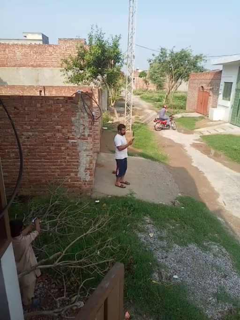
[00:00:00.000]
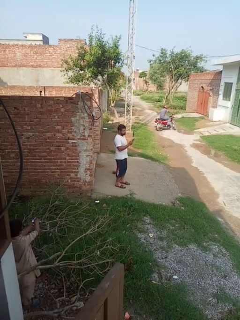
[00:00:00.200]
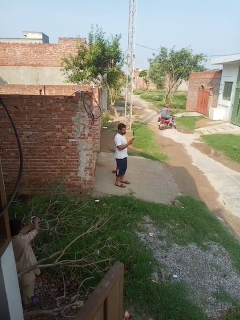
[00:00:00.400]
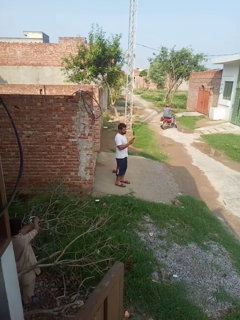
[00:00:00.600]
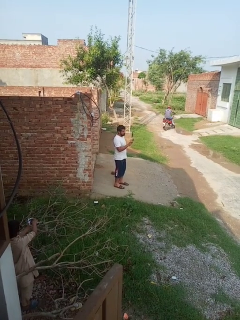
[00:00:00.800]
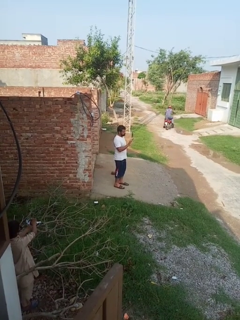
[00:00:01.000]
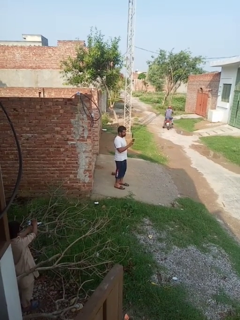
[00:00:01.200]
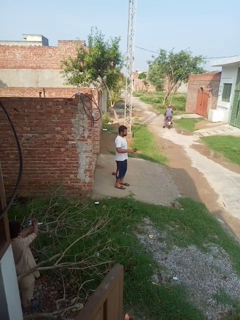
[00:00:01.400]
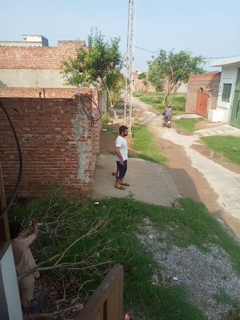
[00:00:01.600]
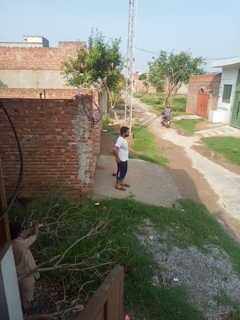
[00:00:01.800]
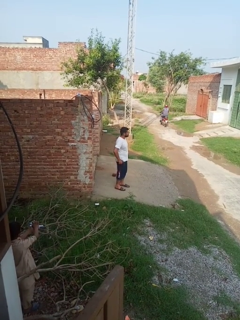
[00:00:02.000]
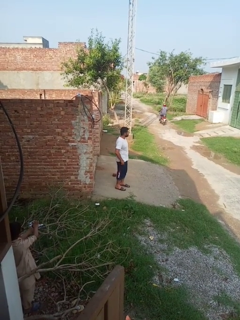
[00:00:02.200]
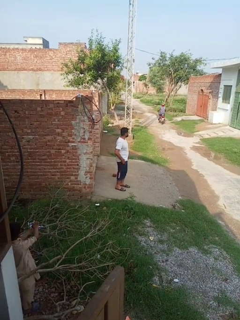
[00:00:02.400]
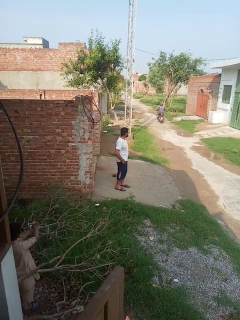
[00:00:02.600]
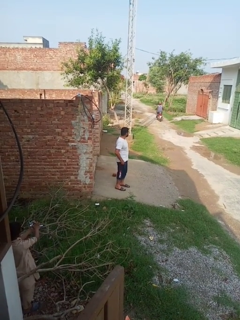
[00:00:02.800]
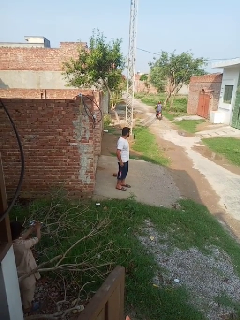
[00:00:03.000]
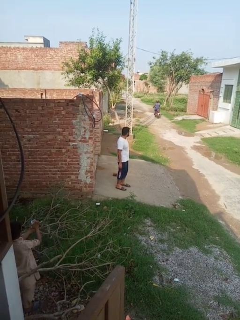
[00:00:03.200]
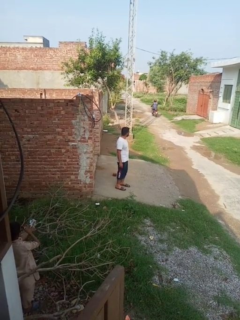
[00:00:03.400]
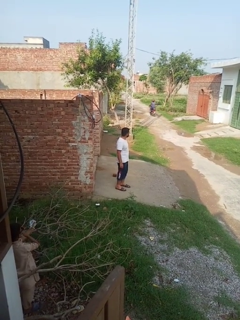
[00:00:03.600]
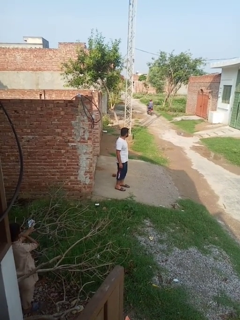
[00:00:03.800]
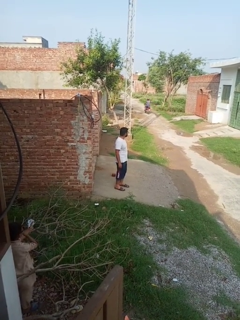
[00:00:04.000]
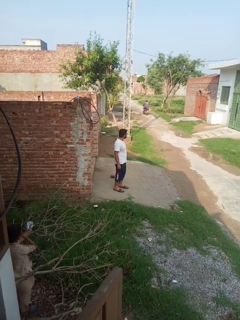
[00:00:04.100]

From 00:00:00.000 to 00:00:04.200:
person puts phone into pocket

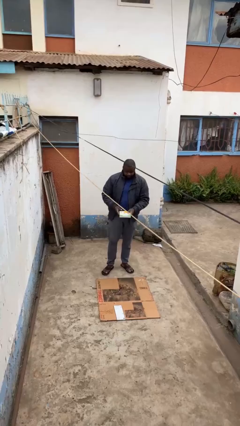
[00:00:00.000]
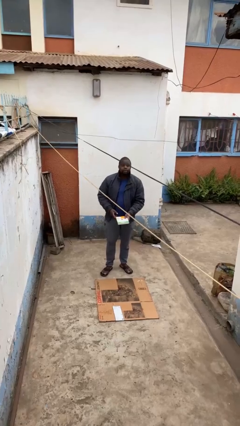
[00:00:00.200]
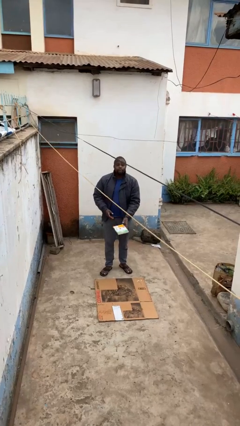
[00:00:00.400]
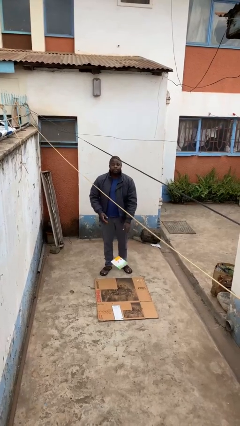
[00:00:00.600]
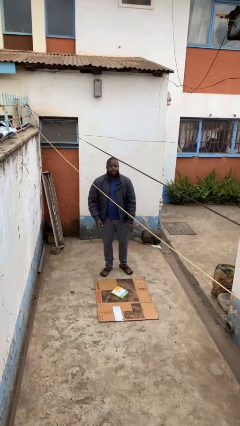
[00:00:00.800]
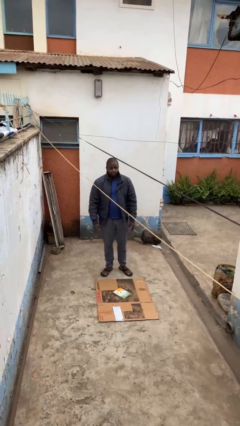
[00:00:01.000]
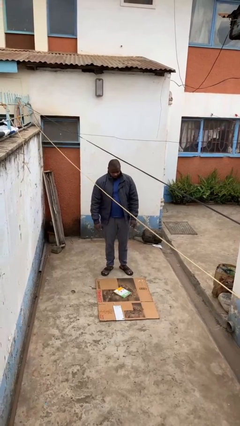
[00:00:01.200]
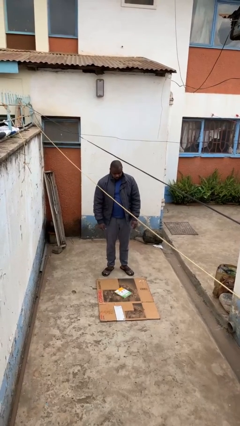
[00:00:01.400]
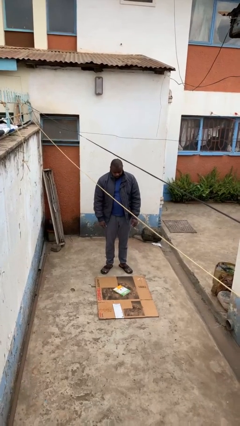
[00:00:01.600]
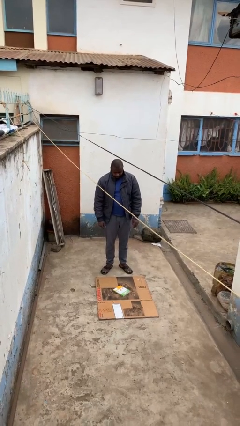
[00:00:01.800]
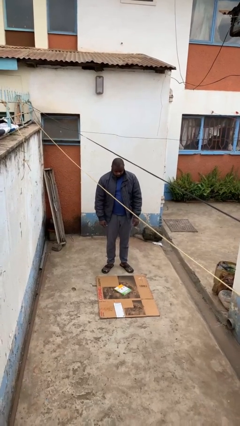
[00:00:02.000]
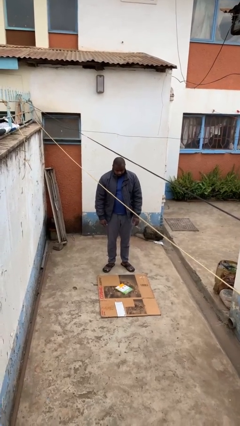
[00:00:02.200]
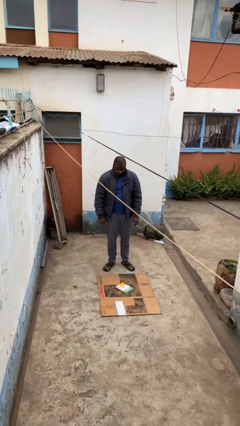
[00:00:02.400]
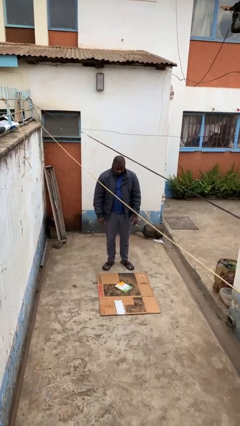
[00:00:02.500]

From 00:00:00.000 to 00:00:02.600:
person drops object

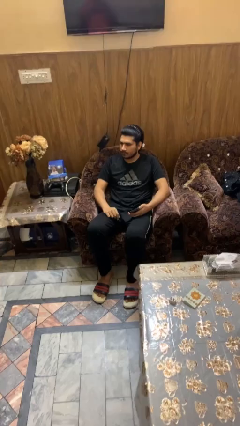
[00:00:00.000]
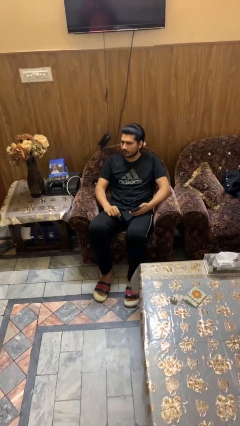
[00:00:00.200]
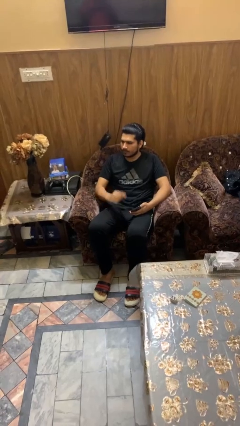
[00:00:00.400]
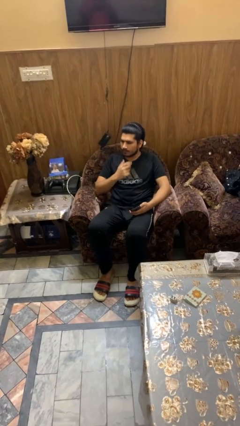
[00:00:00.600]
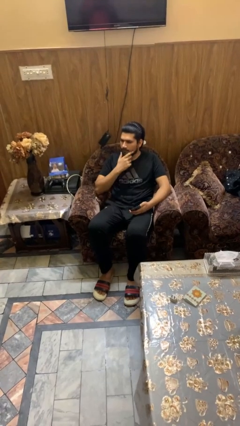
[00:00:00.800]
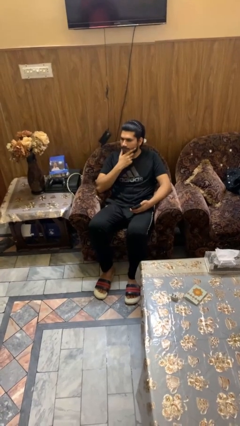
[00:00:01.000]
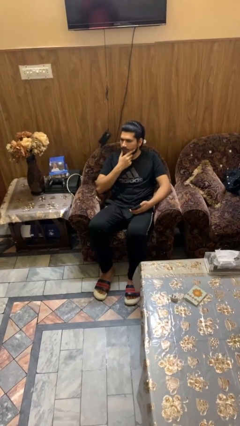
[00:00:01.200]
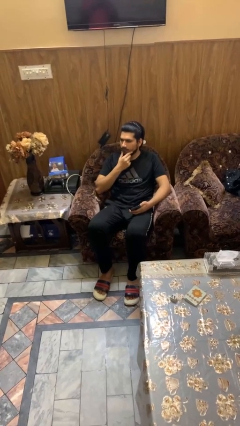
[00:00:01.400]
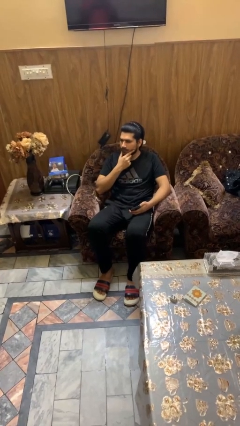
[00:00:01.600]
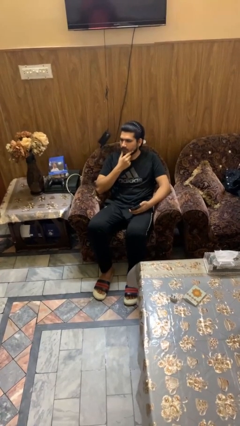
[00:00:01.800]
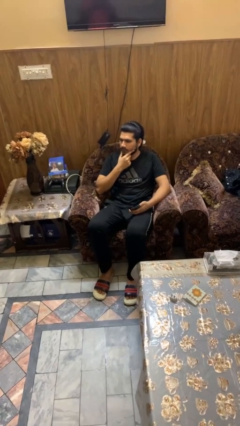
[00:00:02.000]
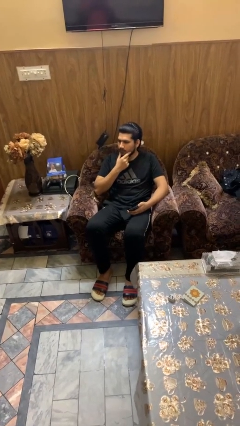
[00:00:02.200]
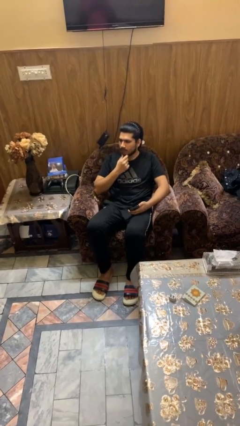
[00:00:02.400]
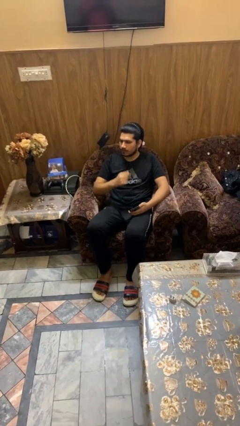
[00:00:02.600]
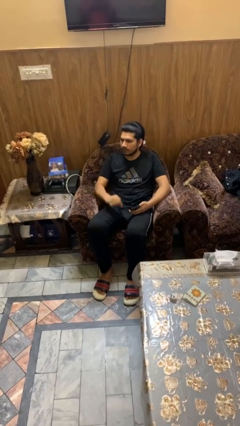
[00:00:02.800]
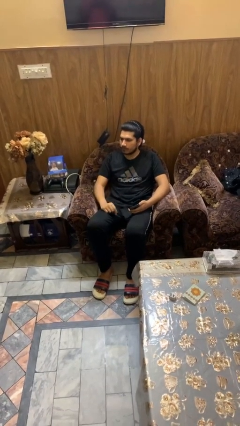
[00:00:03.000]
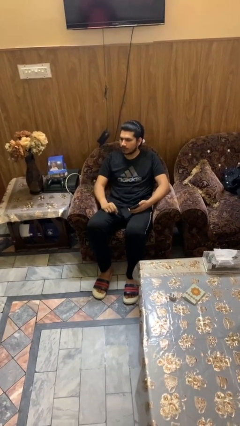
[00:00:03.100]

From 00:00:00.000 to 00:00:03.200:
person strokes chin

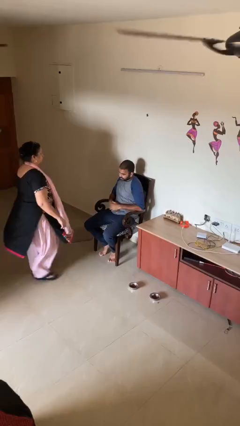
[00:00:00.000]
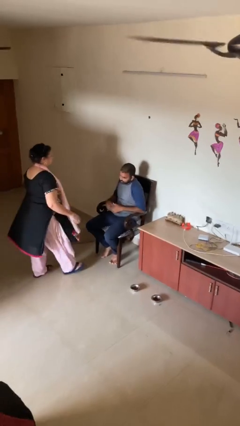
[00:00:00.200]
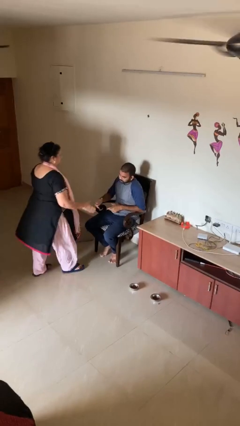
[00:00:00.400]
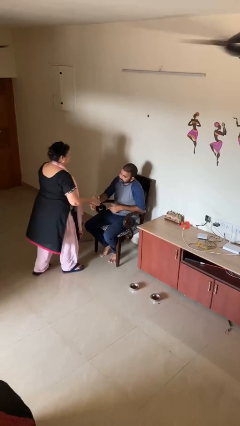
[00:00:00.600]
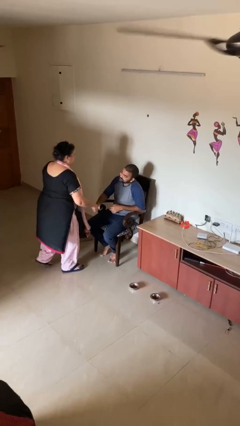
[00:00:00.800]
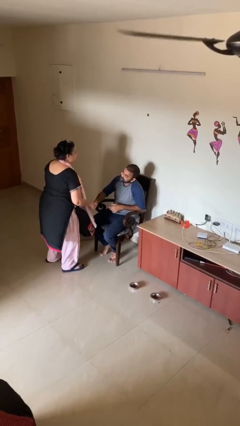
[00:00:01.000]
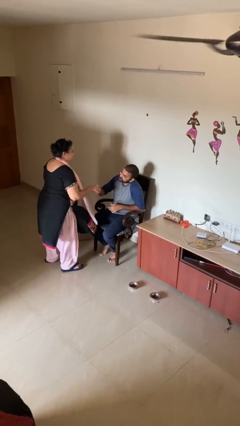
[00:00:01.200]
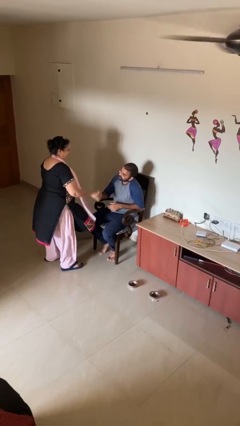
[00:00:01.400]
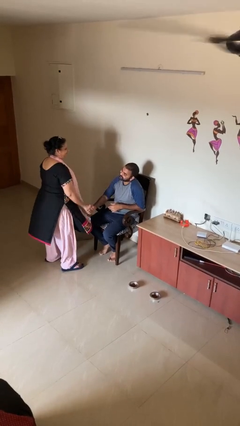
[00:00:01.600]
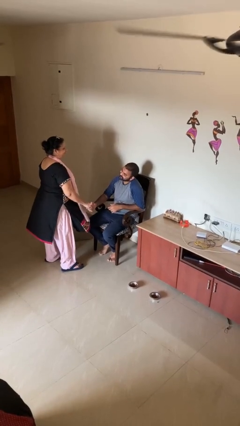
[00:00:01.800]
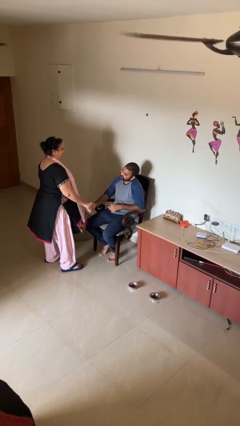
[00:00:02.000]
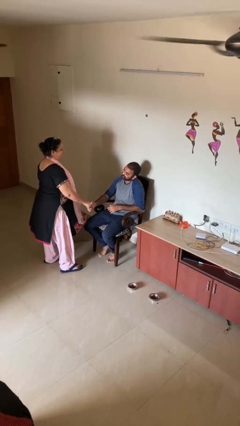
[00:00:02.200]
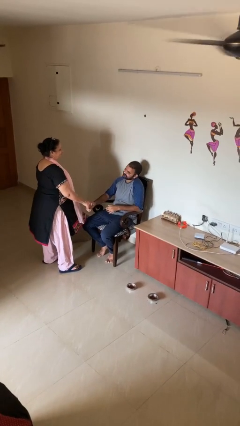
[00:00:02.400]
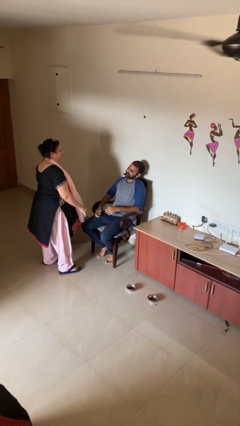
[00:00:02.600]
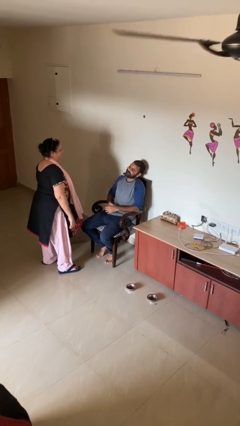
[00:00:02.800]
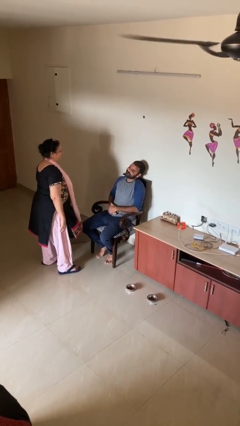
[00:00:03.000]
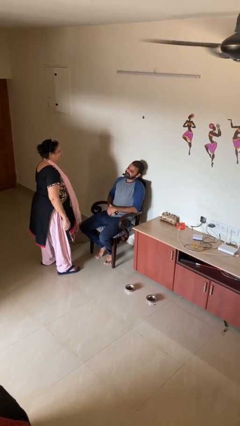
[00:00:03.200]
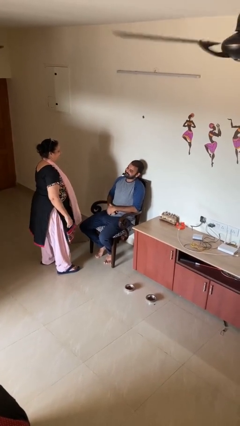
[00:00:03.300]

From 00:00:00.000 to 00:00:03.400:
person shakes hand

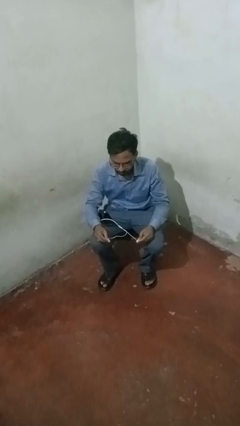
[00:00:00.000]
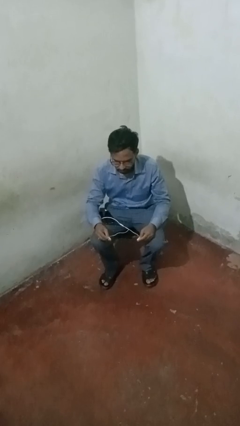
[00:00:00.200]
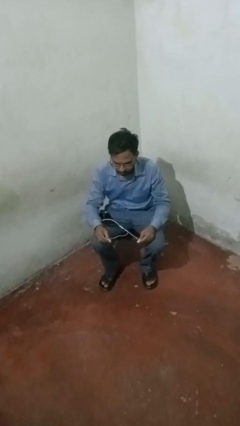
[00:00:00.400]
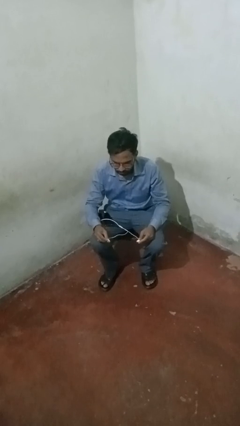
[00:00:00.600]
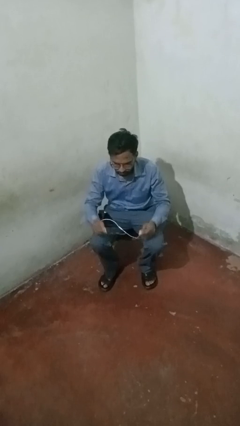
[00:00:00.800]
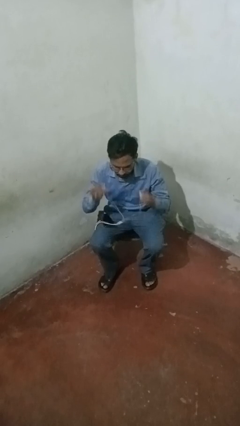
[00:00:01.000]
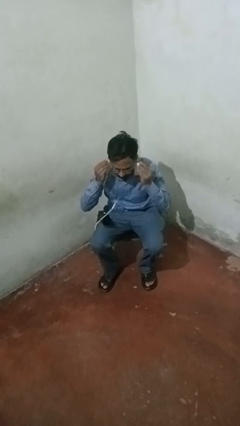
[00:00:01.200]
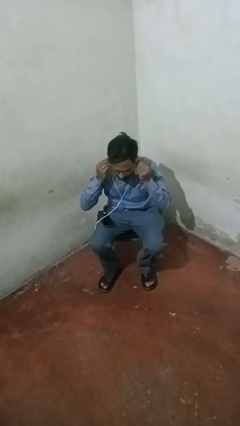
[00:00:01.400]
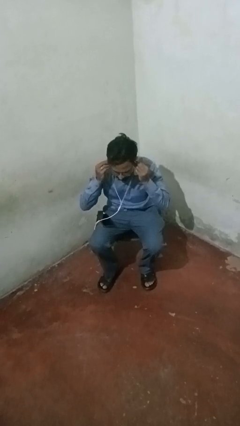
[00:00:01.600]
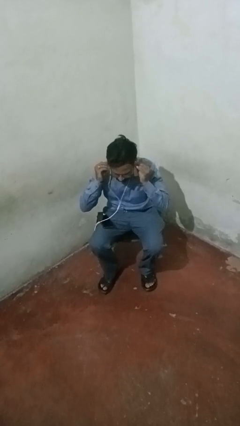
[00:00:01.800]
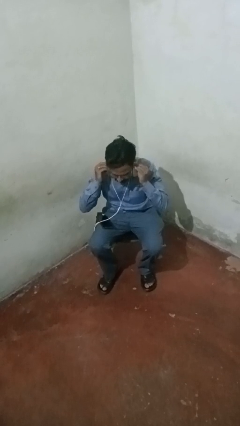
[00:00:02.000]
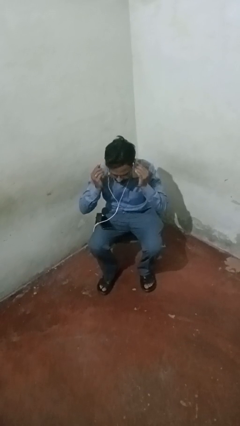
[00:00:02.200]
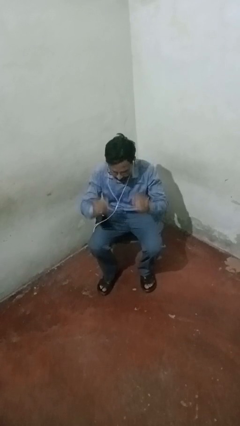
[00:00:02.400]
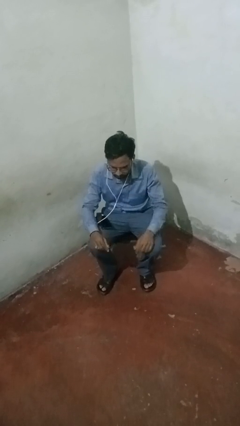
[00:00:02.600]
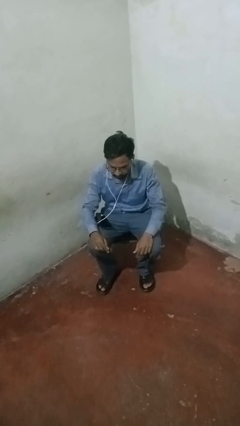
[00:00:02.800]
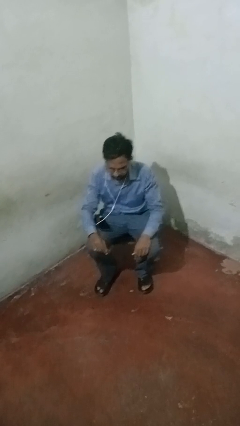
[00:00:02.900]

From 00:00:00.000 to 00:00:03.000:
person puts on headphones

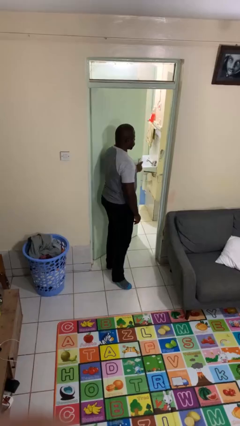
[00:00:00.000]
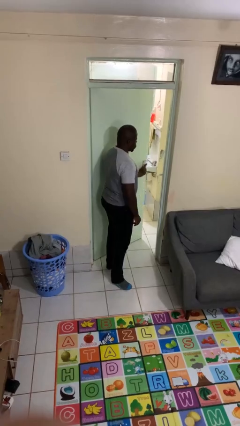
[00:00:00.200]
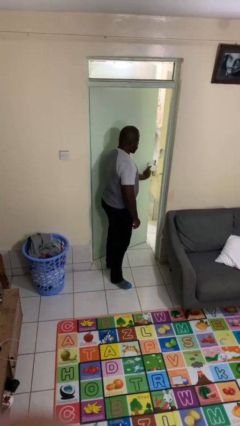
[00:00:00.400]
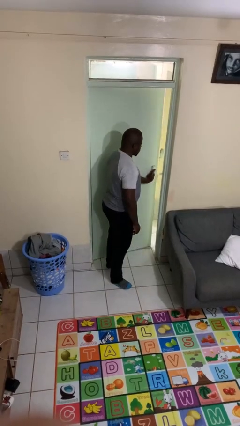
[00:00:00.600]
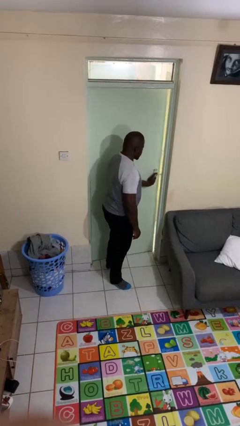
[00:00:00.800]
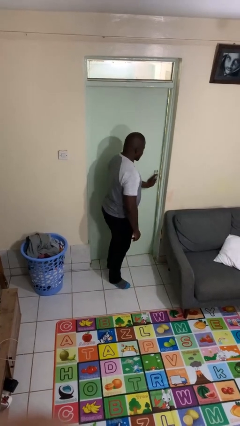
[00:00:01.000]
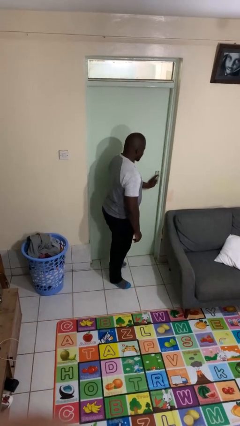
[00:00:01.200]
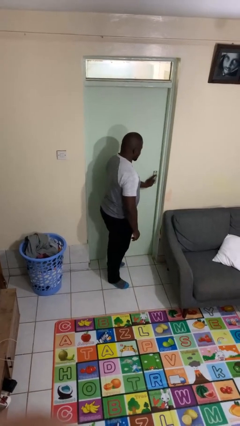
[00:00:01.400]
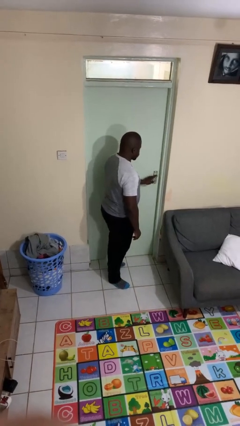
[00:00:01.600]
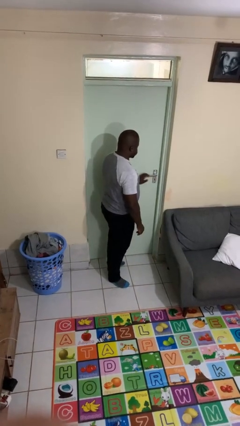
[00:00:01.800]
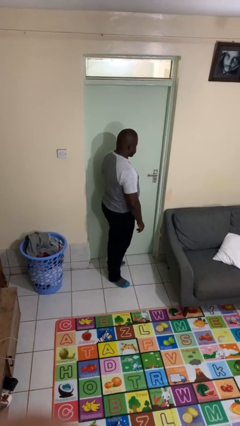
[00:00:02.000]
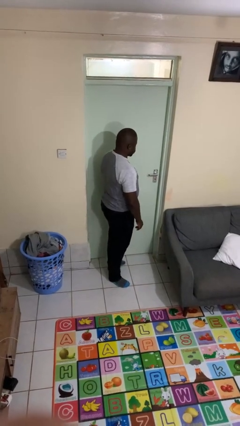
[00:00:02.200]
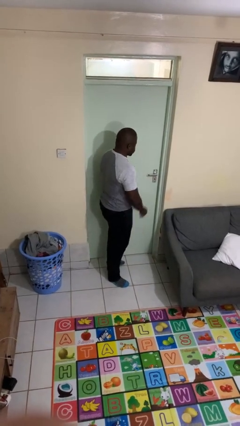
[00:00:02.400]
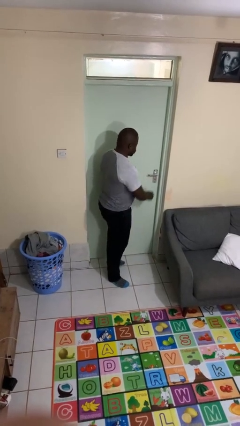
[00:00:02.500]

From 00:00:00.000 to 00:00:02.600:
person closes facility door
